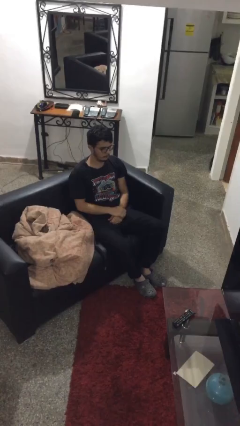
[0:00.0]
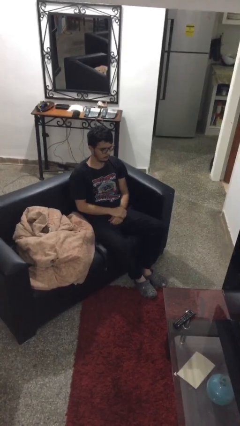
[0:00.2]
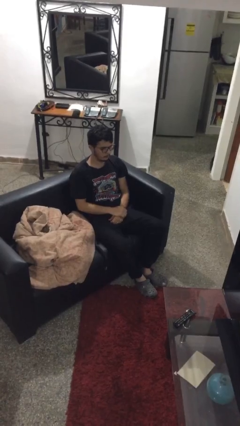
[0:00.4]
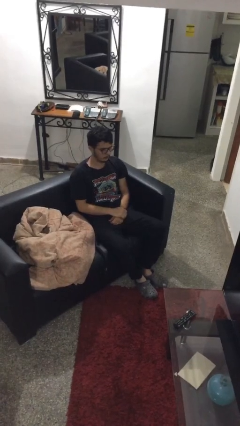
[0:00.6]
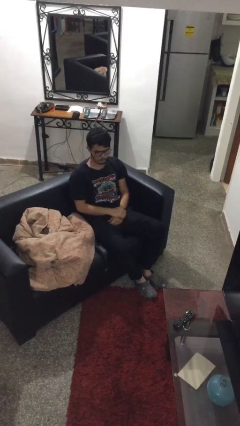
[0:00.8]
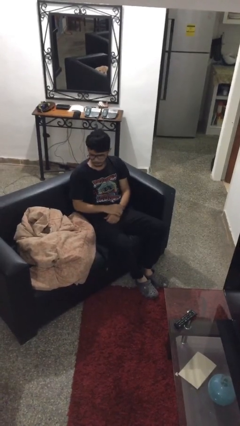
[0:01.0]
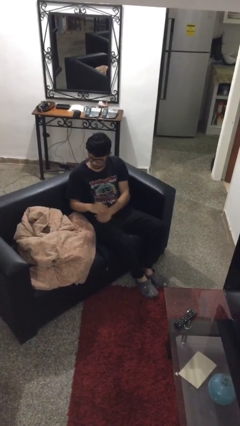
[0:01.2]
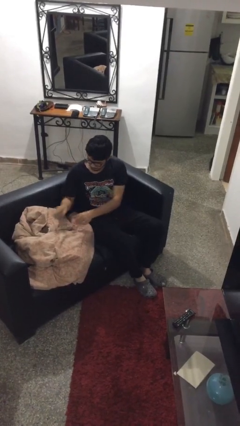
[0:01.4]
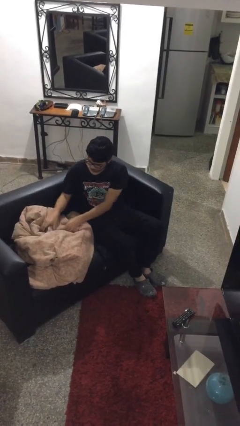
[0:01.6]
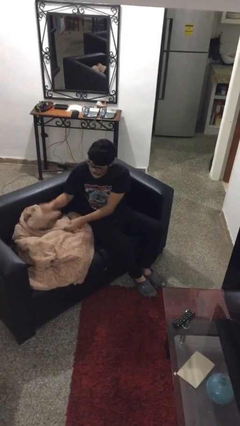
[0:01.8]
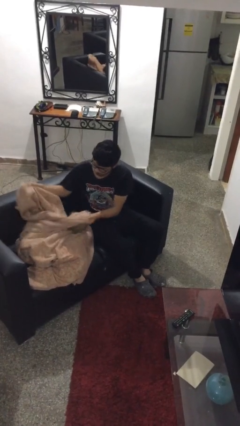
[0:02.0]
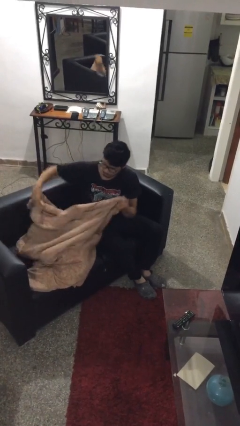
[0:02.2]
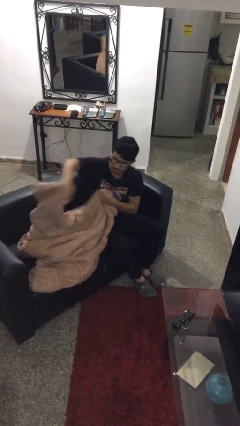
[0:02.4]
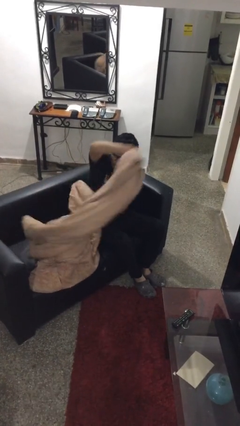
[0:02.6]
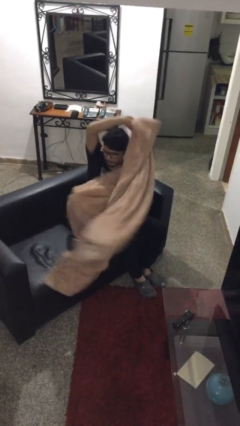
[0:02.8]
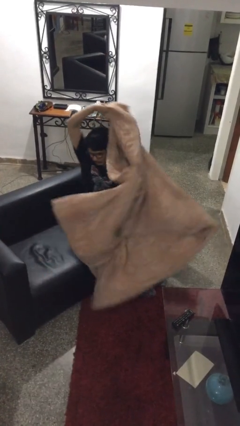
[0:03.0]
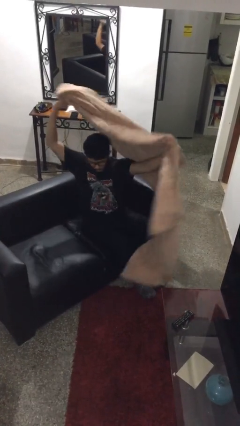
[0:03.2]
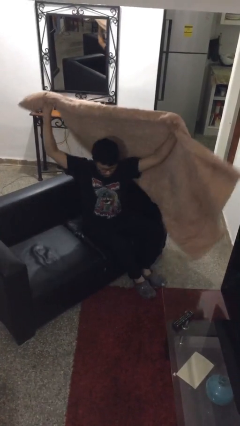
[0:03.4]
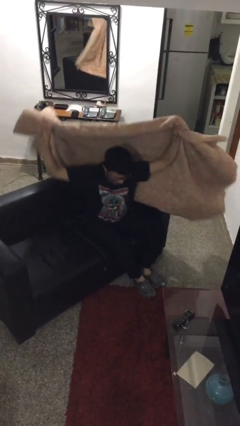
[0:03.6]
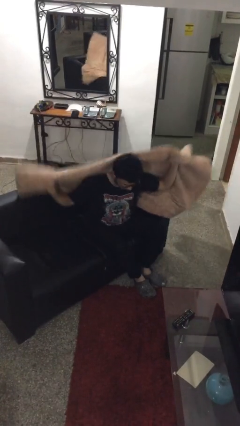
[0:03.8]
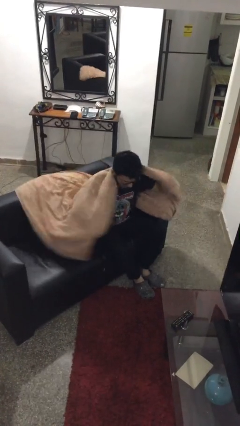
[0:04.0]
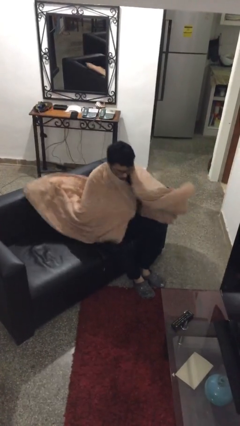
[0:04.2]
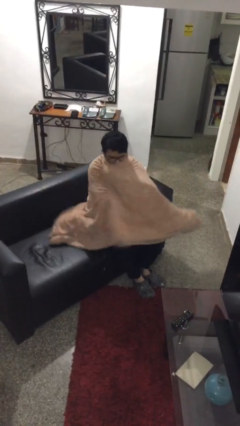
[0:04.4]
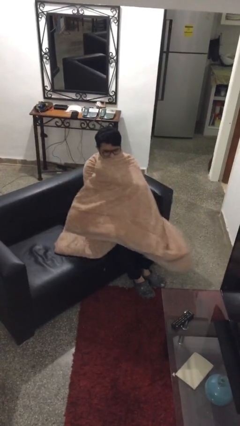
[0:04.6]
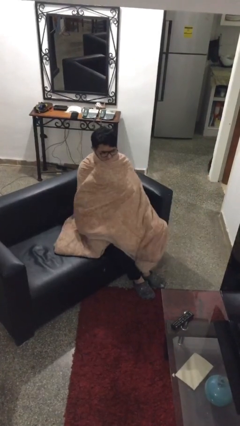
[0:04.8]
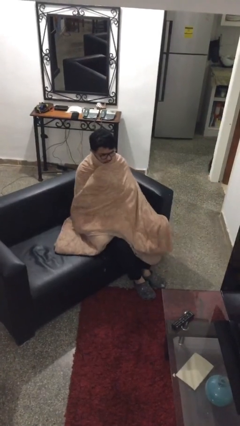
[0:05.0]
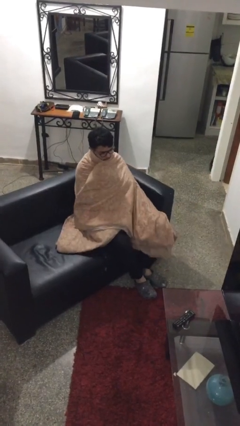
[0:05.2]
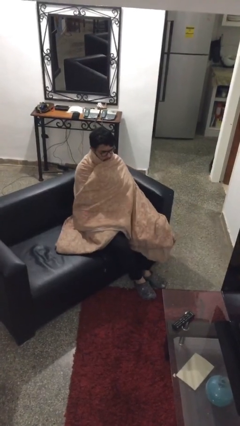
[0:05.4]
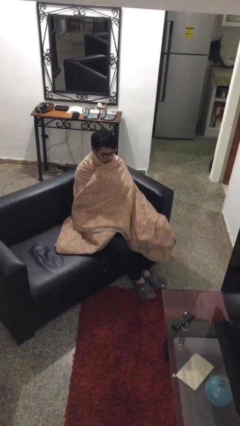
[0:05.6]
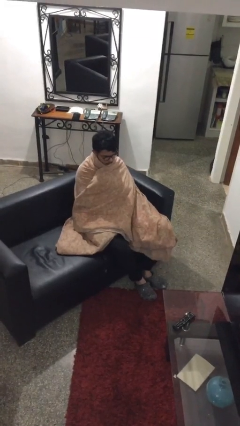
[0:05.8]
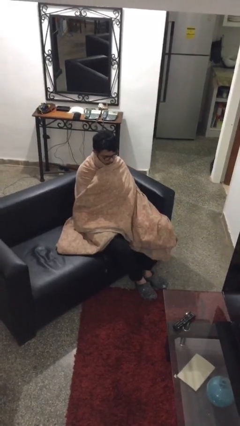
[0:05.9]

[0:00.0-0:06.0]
person covers with blanket

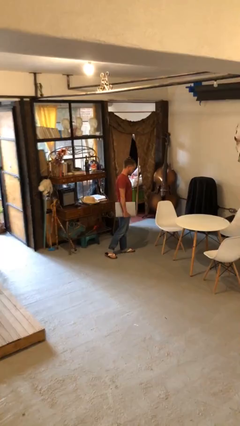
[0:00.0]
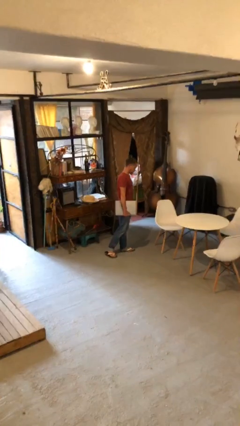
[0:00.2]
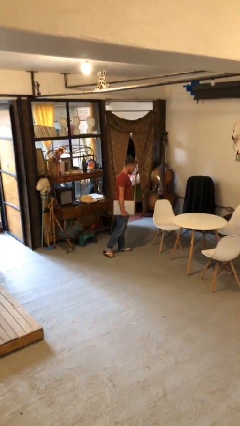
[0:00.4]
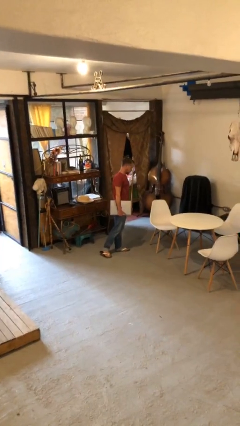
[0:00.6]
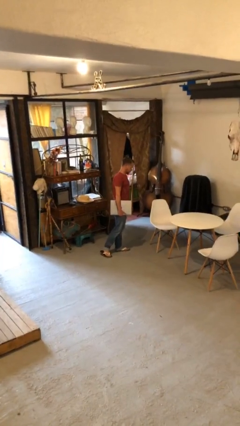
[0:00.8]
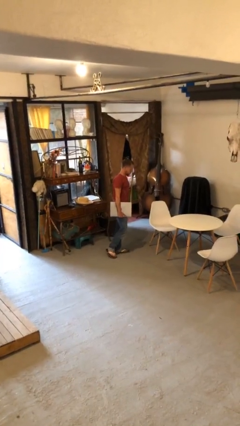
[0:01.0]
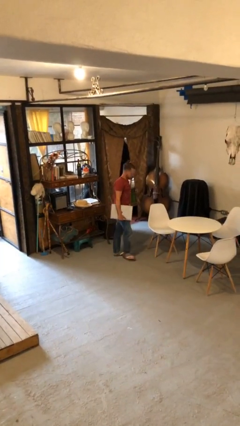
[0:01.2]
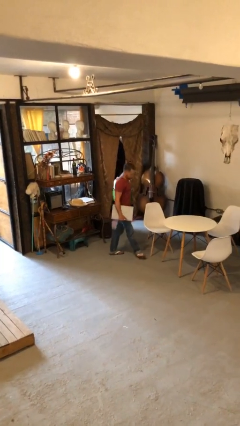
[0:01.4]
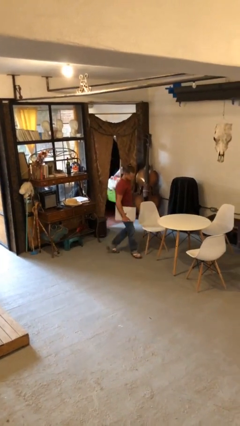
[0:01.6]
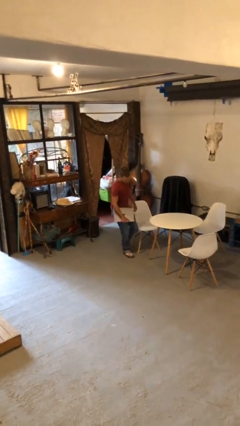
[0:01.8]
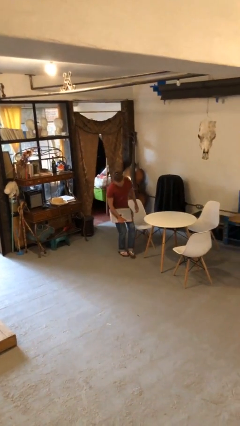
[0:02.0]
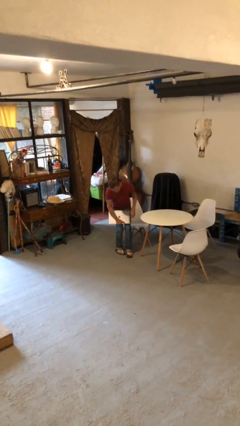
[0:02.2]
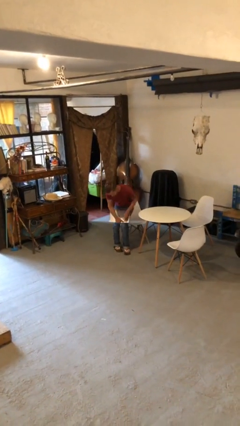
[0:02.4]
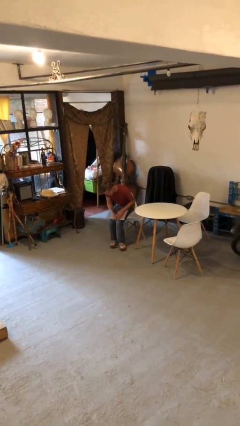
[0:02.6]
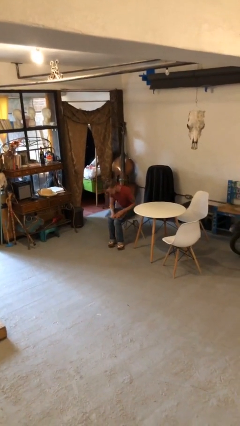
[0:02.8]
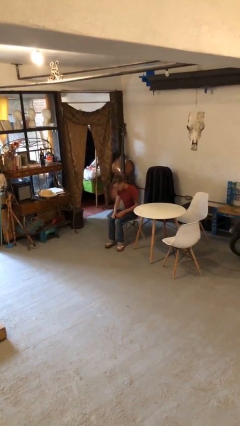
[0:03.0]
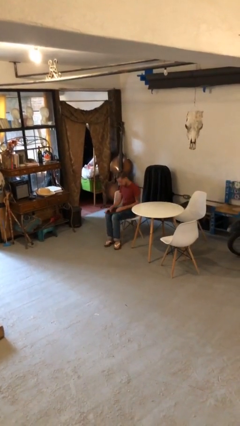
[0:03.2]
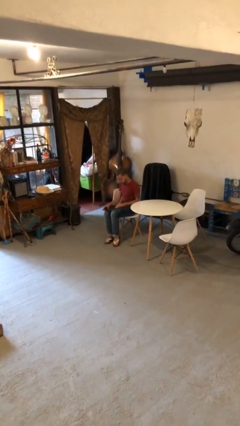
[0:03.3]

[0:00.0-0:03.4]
person sits down

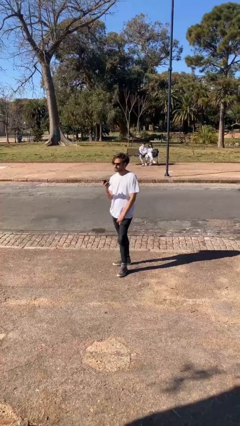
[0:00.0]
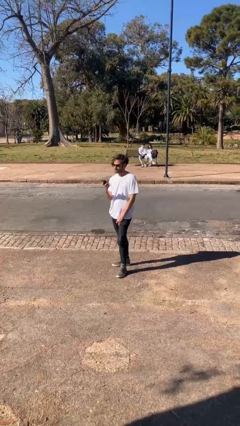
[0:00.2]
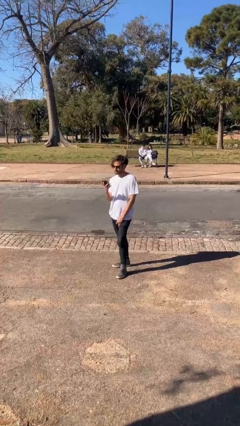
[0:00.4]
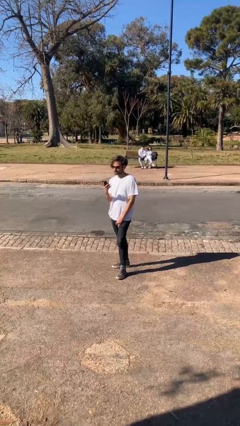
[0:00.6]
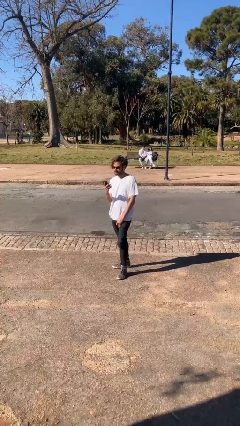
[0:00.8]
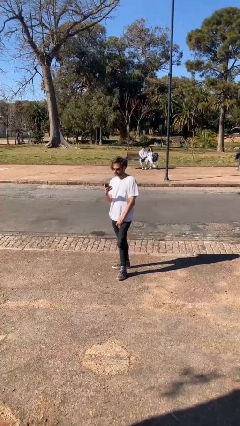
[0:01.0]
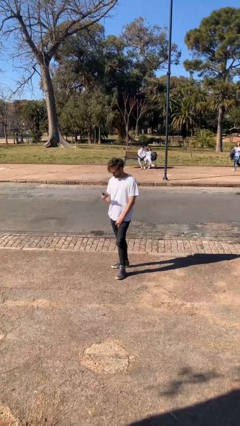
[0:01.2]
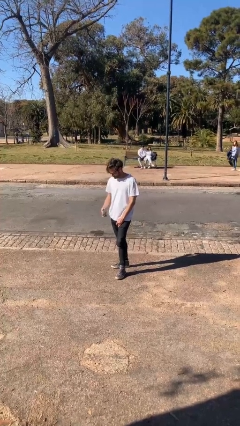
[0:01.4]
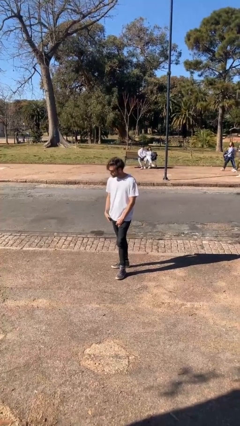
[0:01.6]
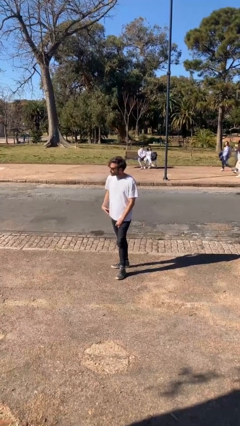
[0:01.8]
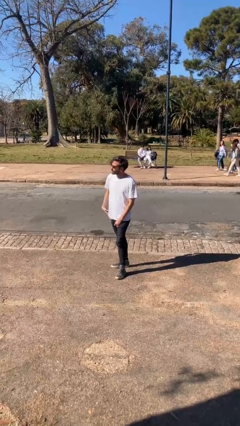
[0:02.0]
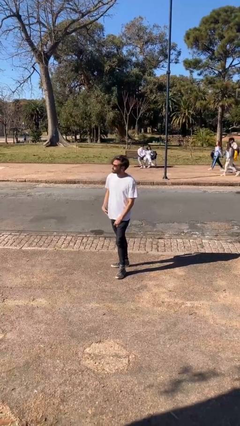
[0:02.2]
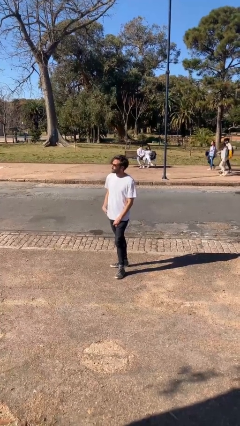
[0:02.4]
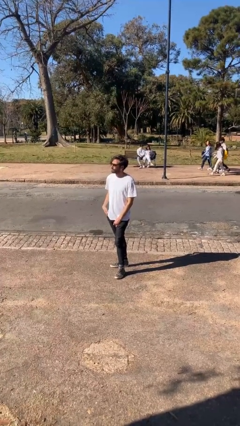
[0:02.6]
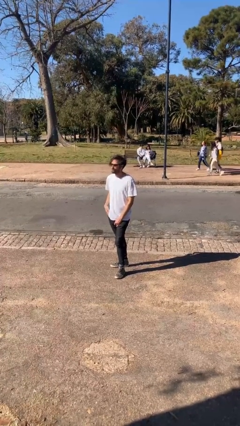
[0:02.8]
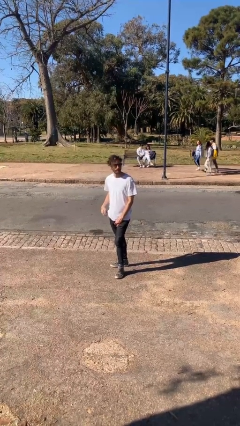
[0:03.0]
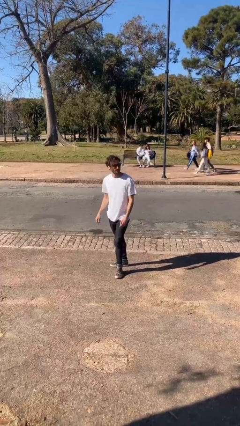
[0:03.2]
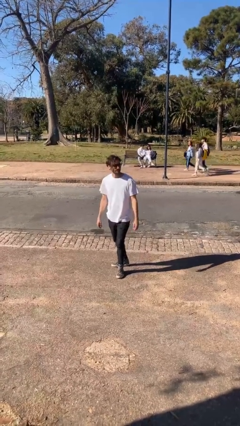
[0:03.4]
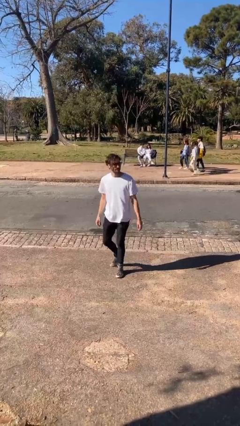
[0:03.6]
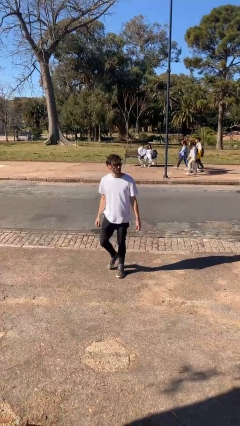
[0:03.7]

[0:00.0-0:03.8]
person puts phone into pocket

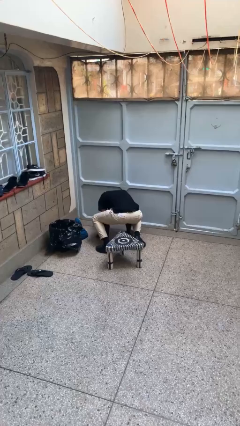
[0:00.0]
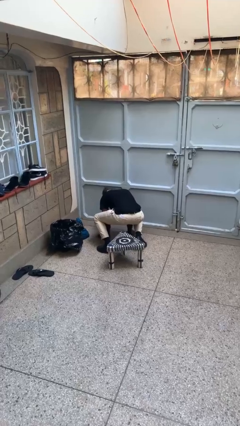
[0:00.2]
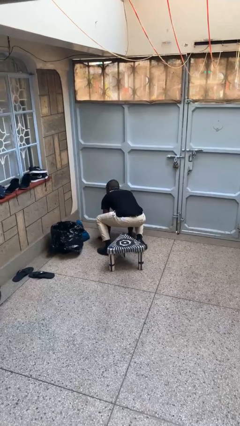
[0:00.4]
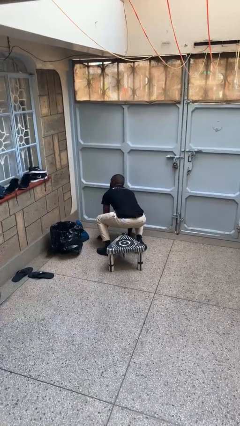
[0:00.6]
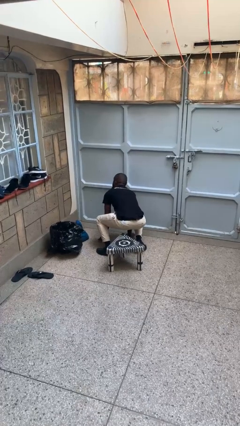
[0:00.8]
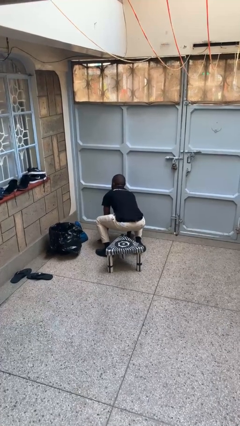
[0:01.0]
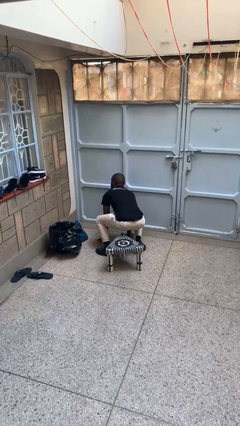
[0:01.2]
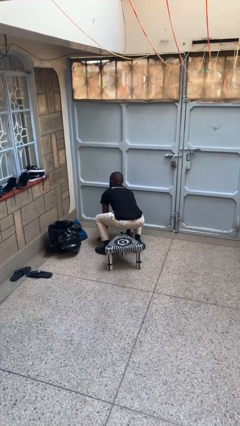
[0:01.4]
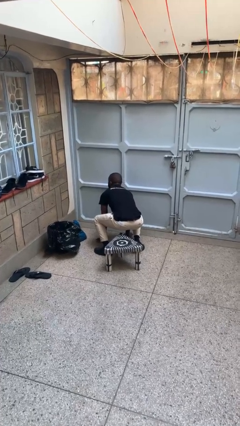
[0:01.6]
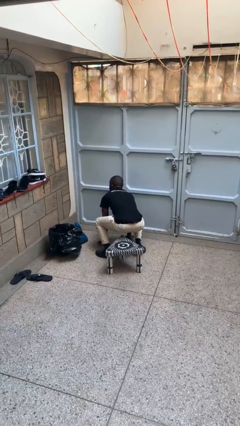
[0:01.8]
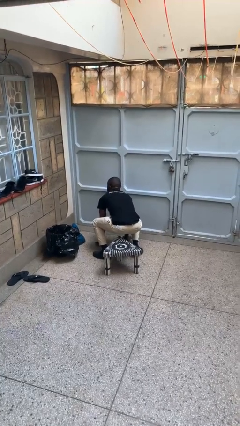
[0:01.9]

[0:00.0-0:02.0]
person stands up from floor

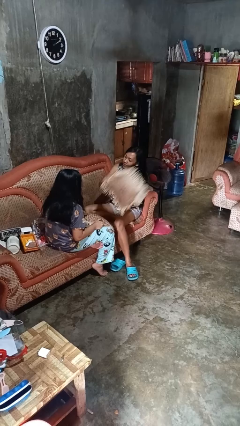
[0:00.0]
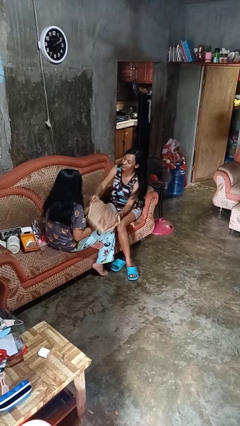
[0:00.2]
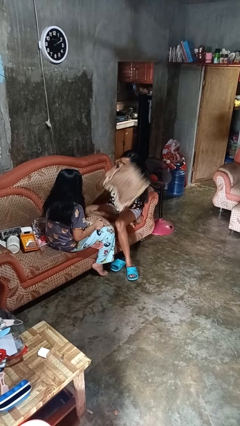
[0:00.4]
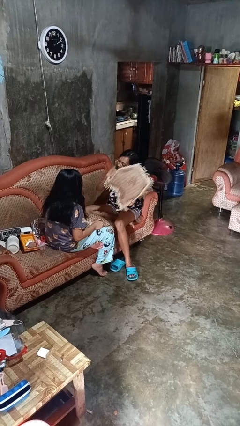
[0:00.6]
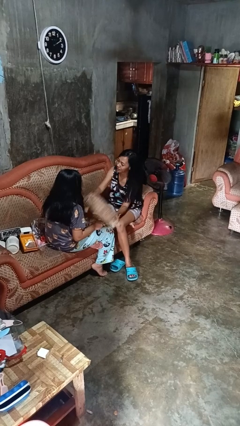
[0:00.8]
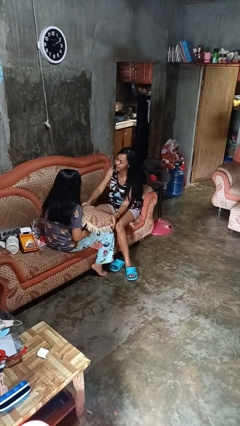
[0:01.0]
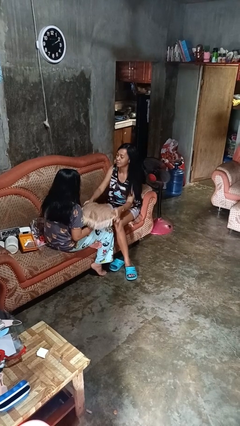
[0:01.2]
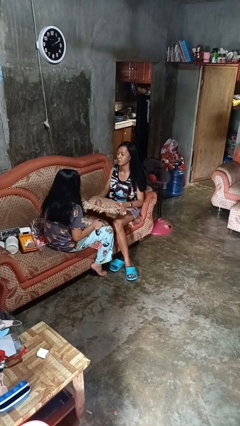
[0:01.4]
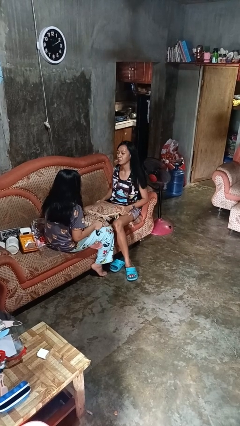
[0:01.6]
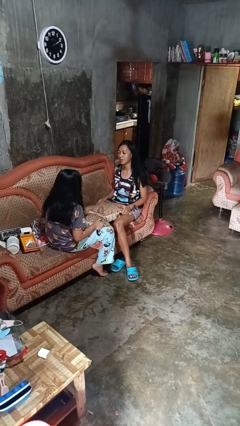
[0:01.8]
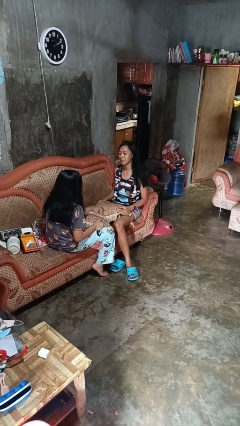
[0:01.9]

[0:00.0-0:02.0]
person hits person with pillow

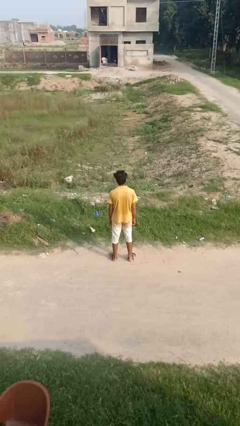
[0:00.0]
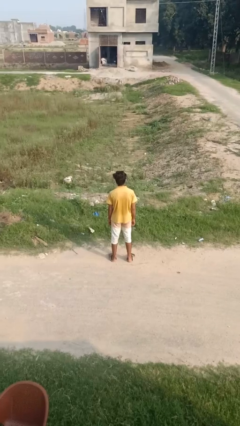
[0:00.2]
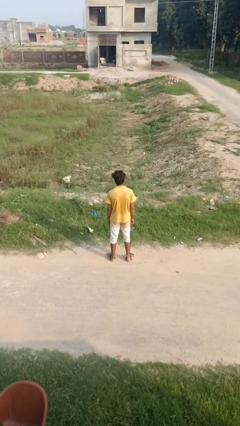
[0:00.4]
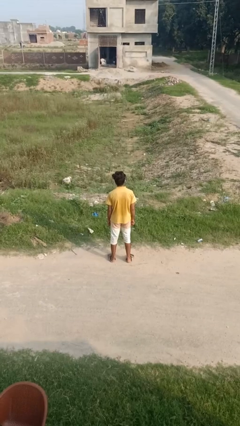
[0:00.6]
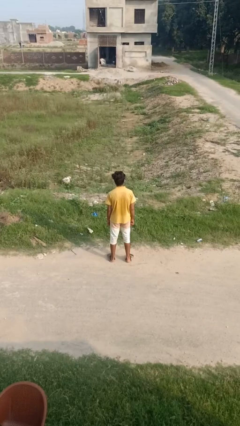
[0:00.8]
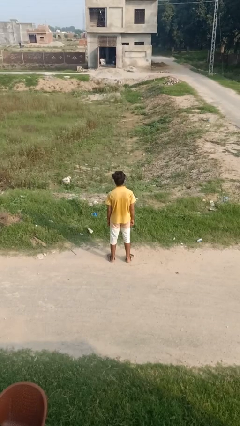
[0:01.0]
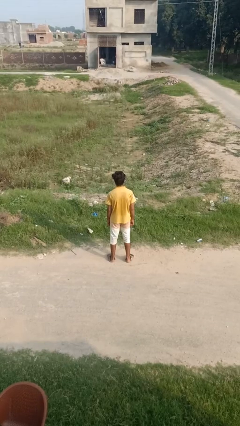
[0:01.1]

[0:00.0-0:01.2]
person dances in place
